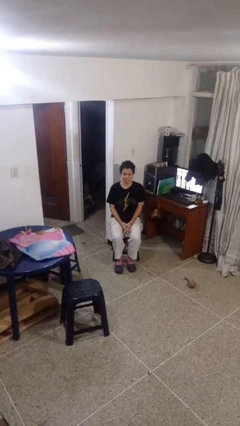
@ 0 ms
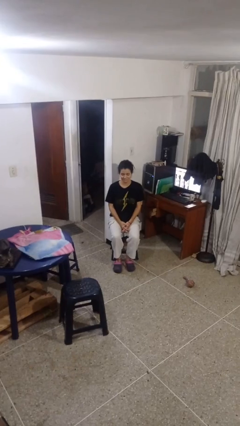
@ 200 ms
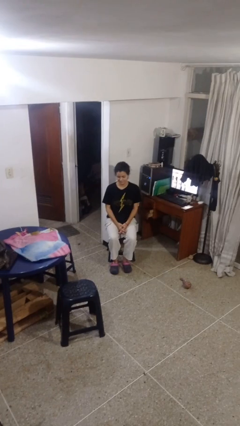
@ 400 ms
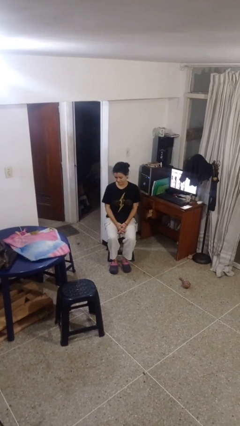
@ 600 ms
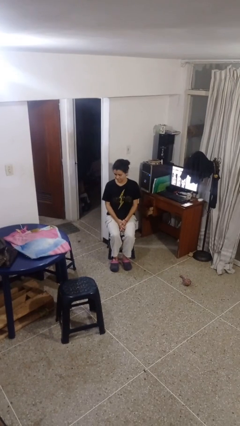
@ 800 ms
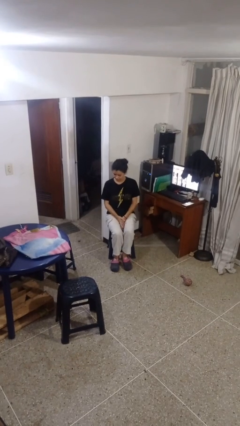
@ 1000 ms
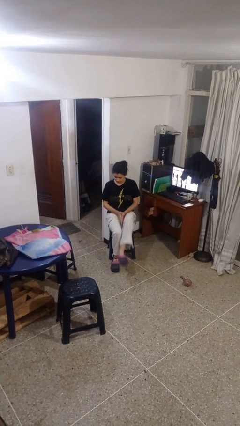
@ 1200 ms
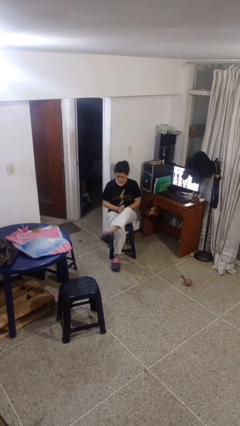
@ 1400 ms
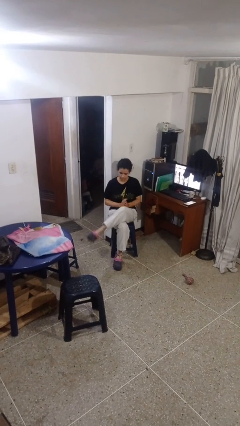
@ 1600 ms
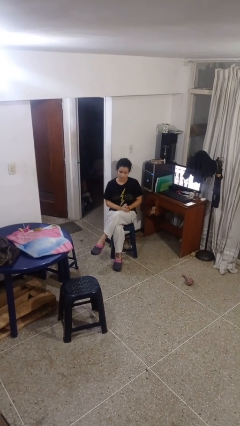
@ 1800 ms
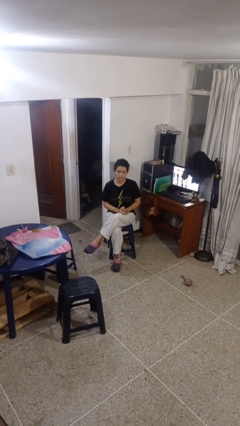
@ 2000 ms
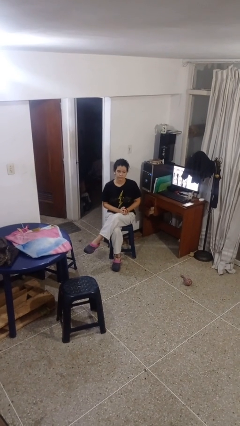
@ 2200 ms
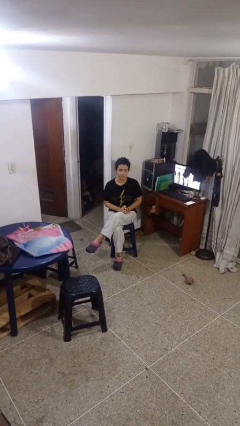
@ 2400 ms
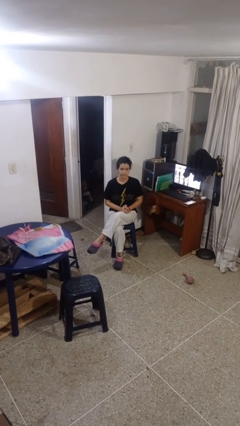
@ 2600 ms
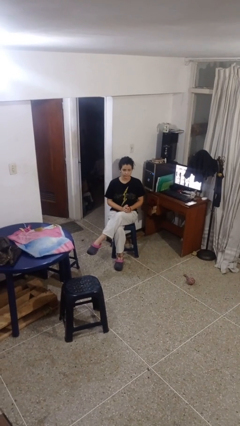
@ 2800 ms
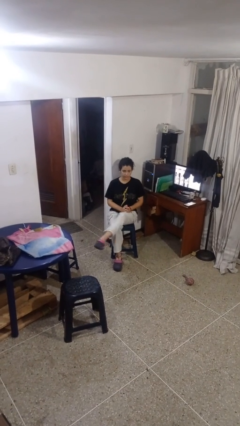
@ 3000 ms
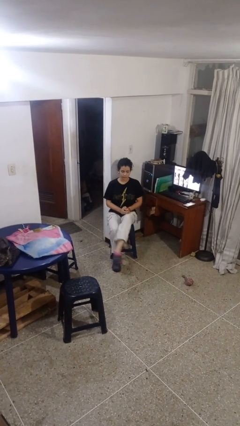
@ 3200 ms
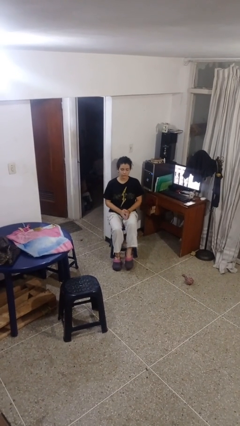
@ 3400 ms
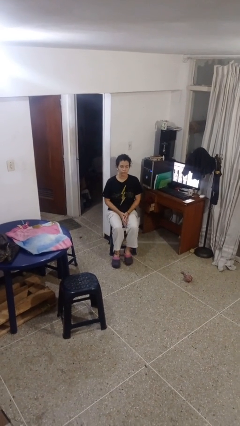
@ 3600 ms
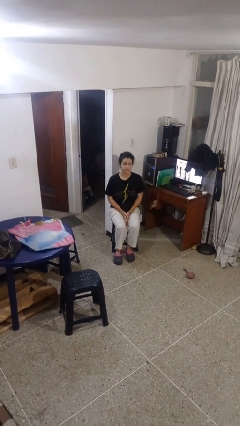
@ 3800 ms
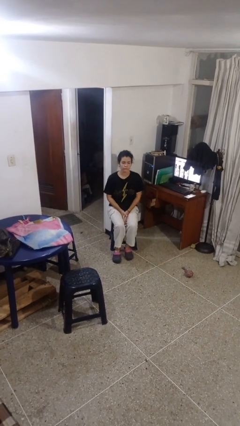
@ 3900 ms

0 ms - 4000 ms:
person crosses legs

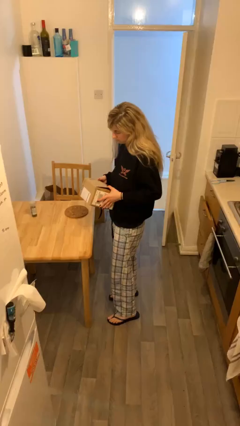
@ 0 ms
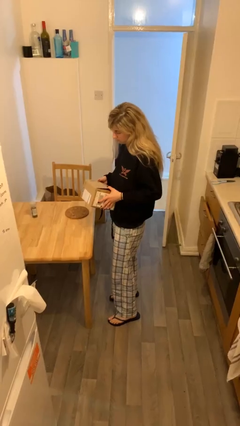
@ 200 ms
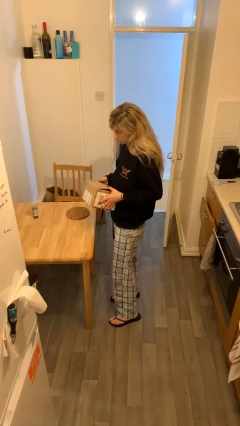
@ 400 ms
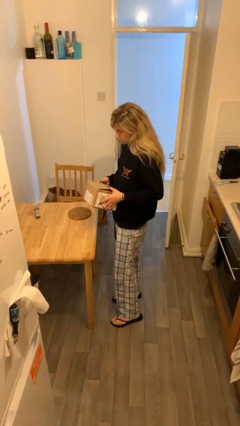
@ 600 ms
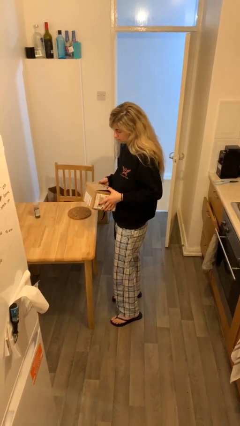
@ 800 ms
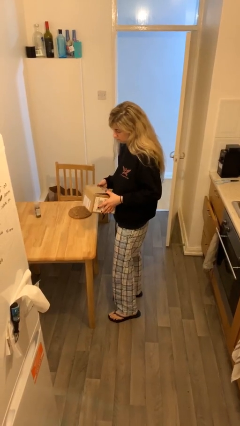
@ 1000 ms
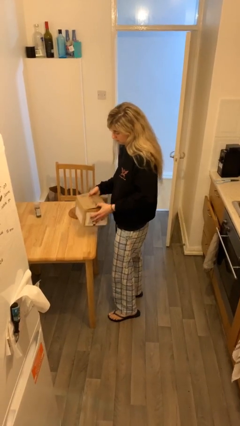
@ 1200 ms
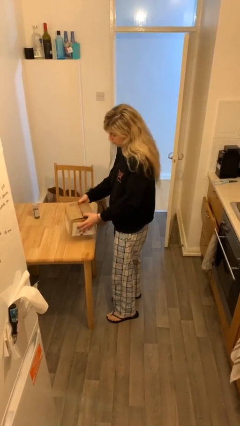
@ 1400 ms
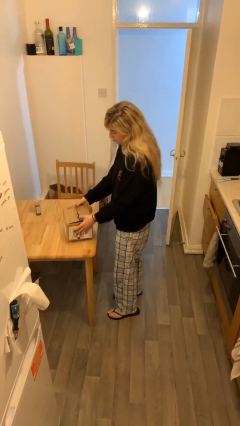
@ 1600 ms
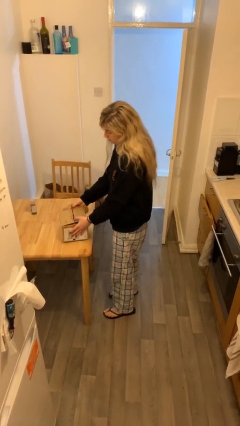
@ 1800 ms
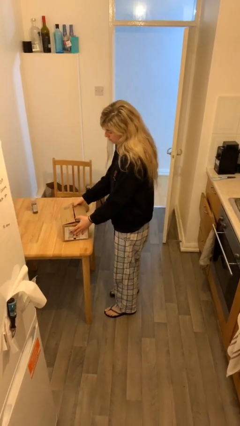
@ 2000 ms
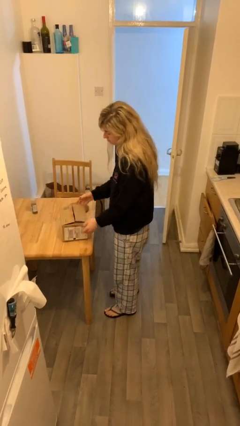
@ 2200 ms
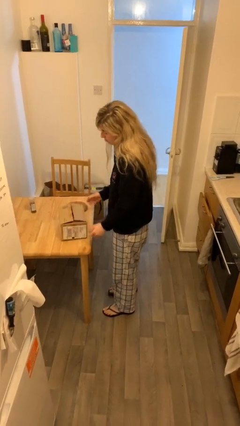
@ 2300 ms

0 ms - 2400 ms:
person puts down object on table

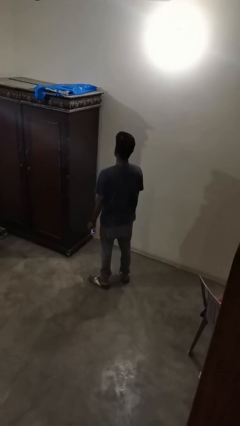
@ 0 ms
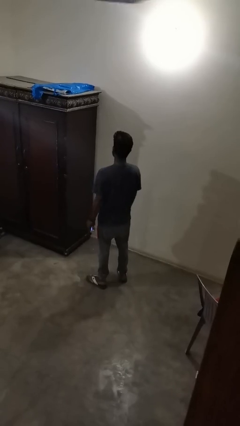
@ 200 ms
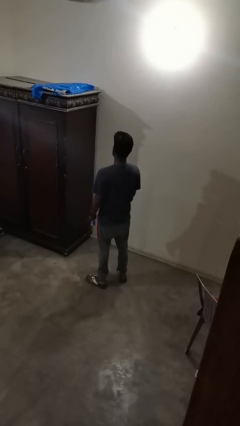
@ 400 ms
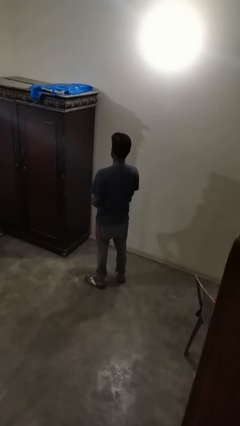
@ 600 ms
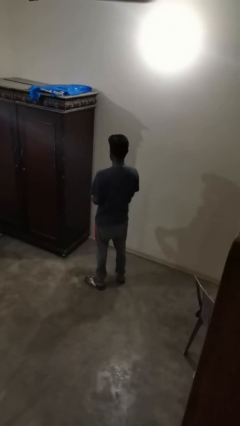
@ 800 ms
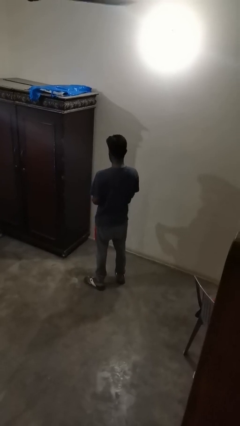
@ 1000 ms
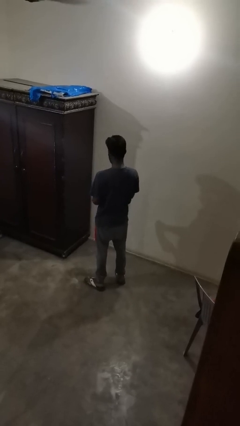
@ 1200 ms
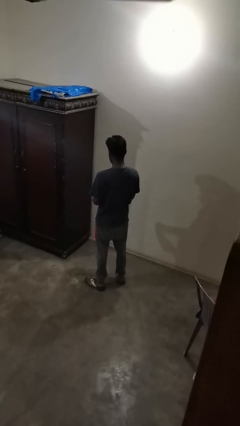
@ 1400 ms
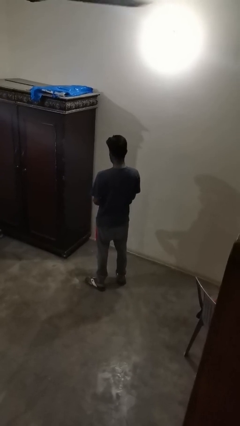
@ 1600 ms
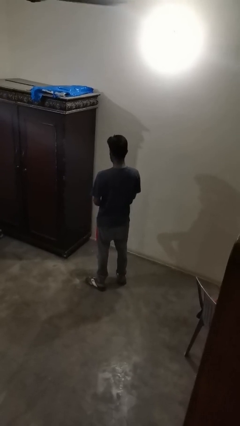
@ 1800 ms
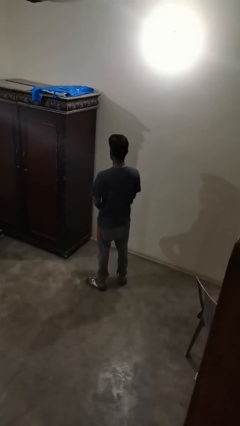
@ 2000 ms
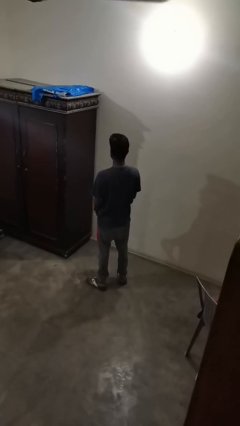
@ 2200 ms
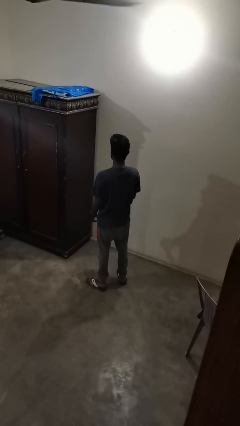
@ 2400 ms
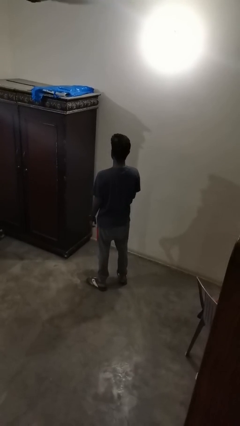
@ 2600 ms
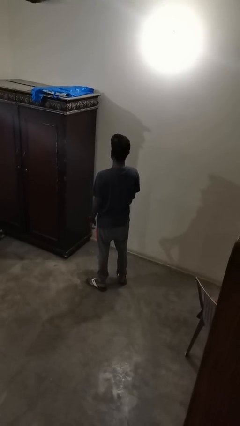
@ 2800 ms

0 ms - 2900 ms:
person opens beverage can

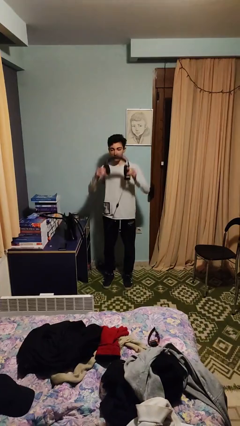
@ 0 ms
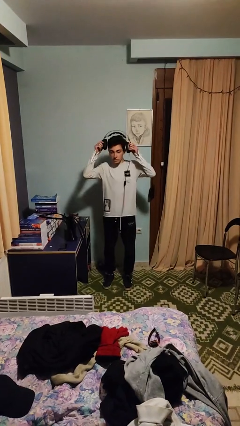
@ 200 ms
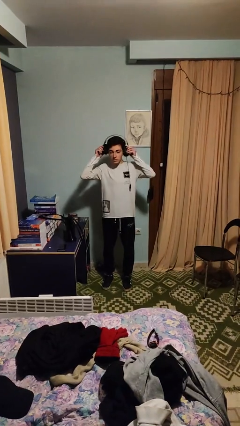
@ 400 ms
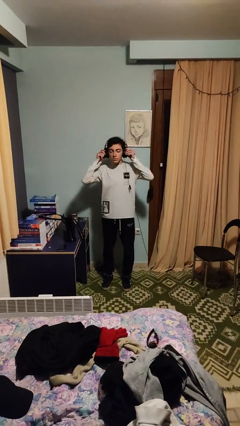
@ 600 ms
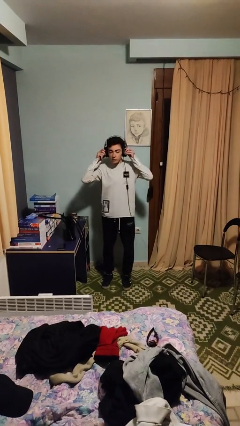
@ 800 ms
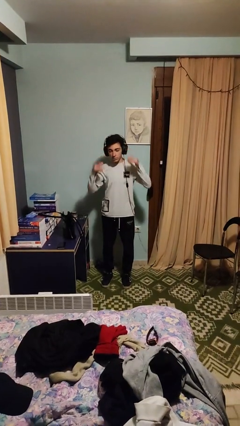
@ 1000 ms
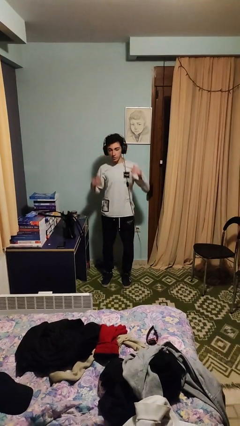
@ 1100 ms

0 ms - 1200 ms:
person puts on headphones

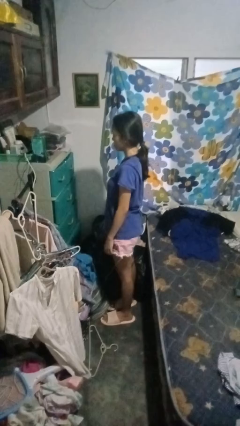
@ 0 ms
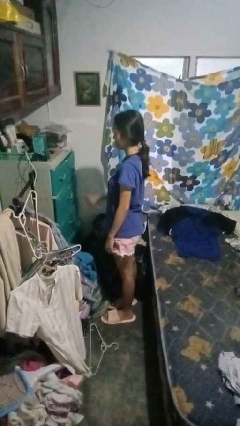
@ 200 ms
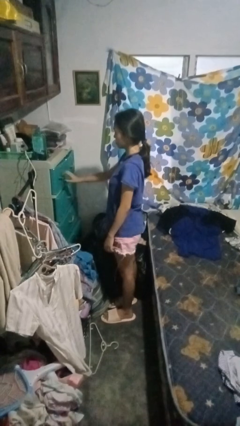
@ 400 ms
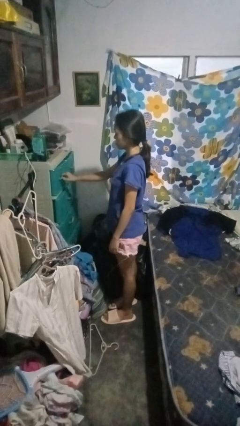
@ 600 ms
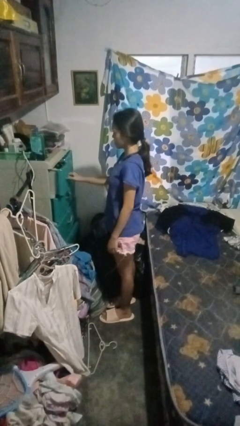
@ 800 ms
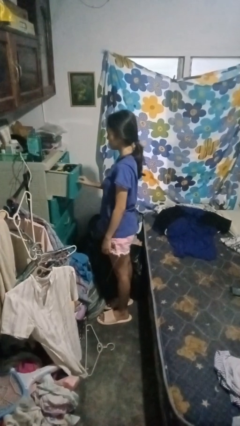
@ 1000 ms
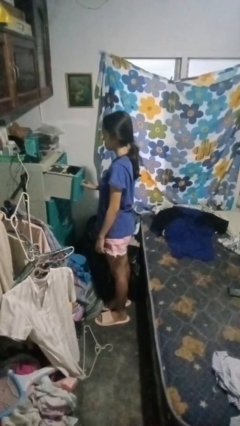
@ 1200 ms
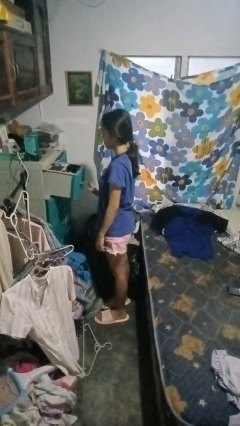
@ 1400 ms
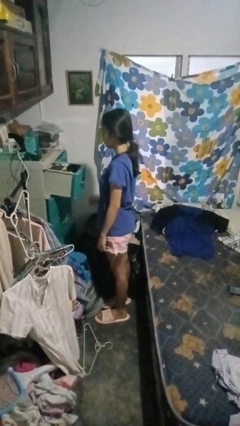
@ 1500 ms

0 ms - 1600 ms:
person opens dresser drawer

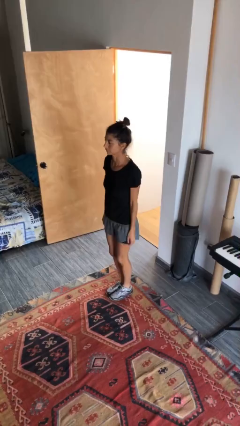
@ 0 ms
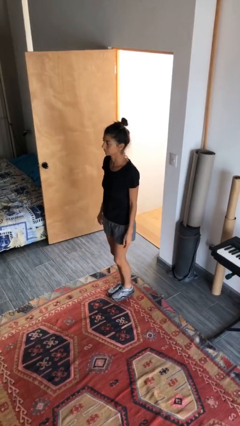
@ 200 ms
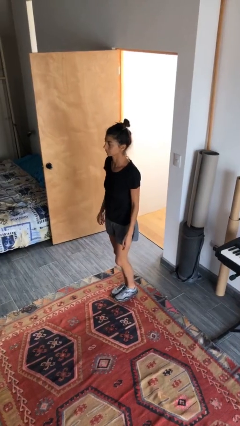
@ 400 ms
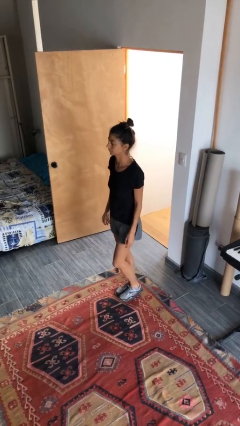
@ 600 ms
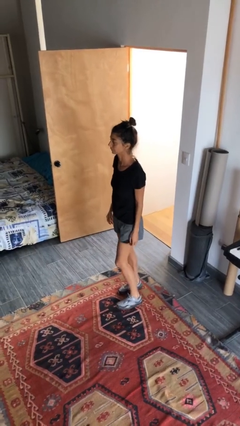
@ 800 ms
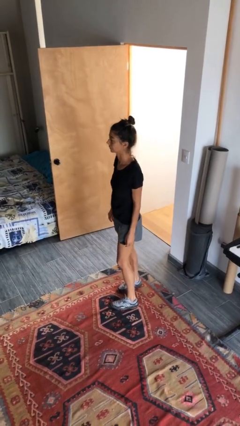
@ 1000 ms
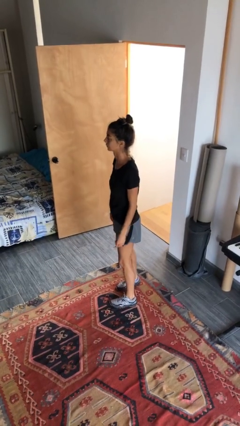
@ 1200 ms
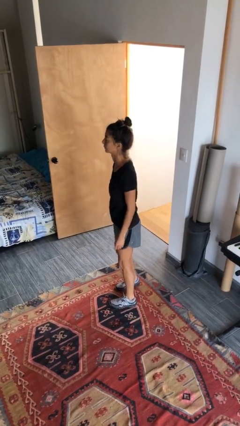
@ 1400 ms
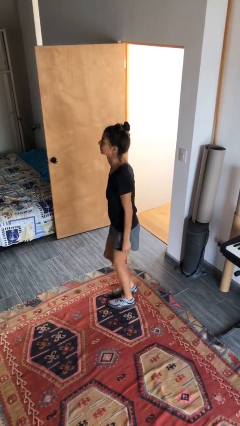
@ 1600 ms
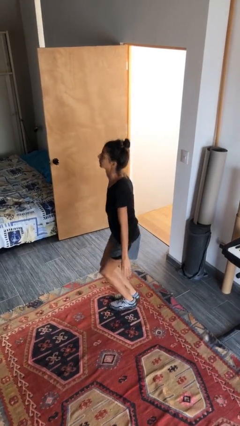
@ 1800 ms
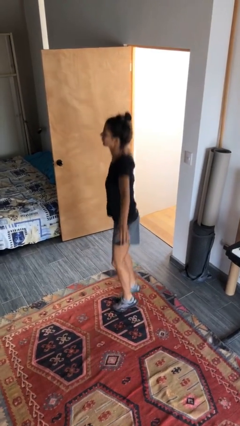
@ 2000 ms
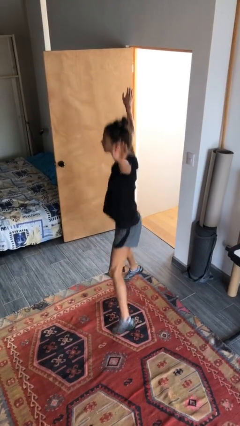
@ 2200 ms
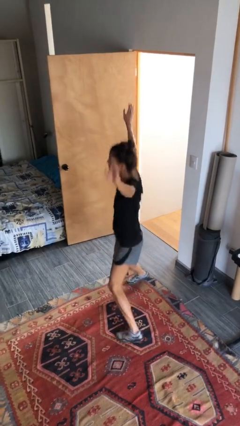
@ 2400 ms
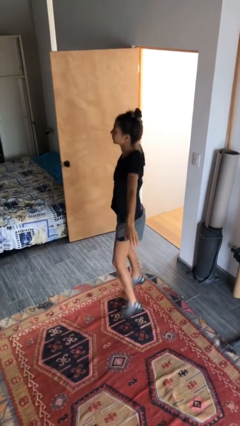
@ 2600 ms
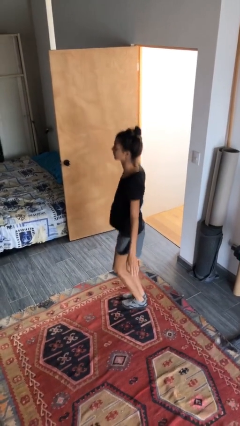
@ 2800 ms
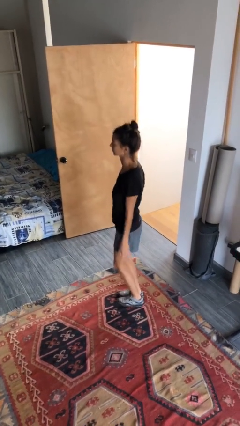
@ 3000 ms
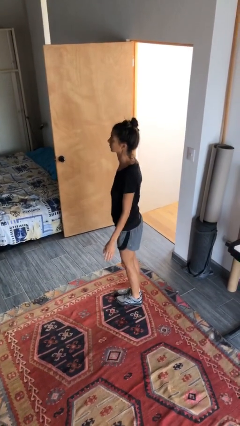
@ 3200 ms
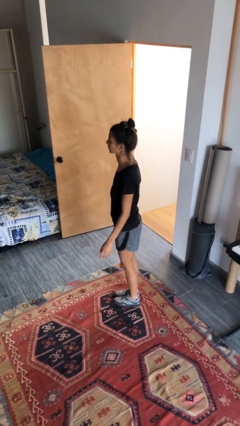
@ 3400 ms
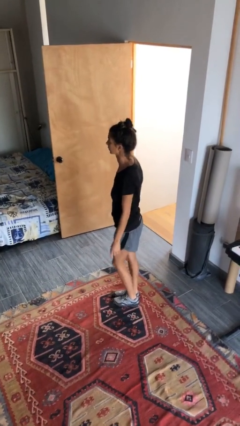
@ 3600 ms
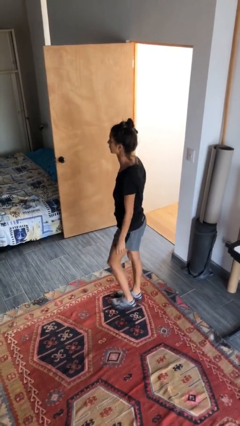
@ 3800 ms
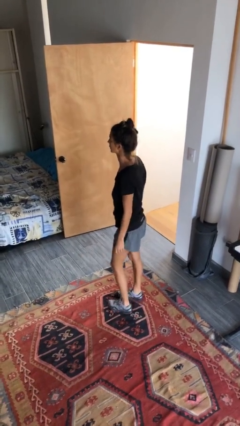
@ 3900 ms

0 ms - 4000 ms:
person exercises with jumping jacks

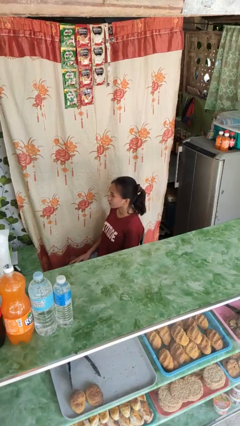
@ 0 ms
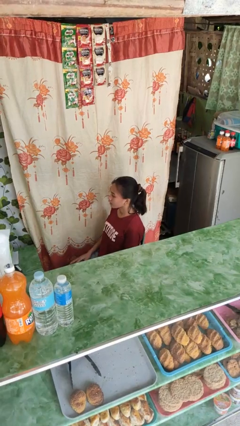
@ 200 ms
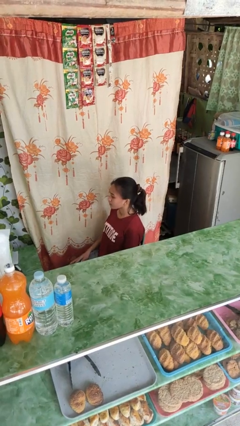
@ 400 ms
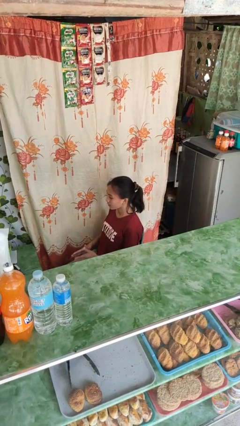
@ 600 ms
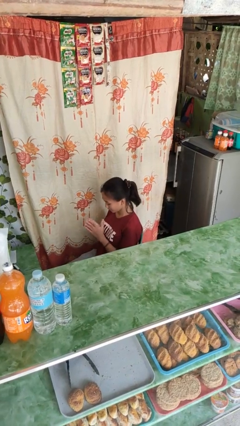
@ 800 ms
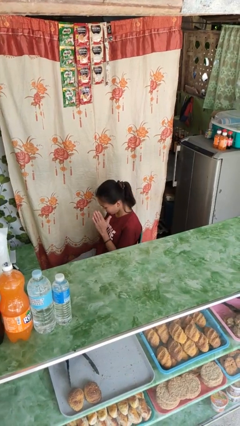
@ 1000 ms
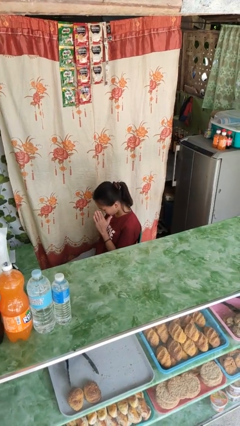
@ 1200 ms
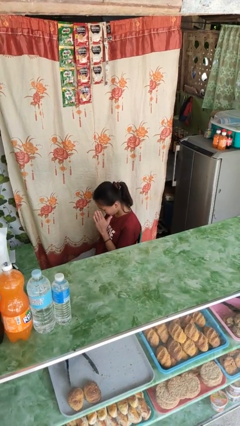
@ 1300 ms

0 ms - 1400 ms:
person rubs eyes
